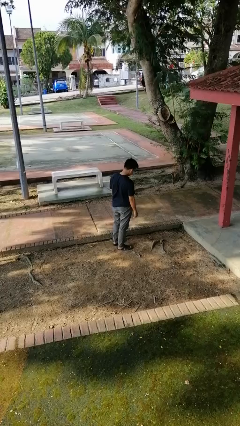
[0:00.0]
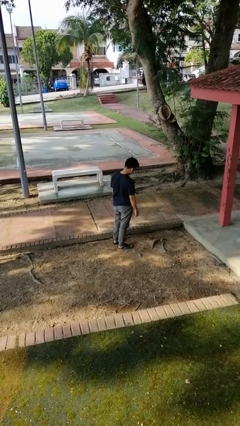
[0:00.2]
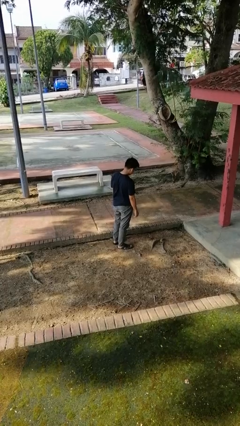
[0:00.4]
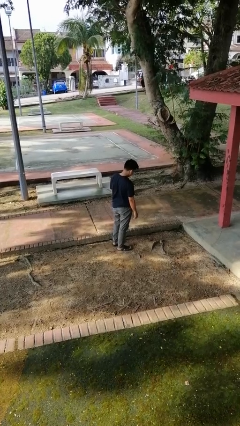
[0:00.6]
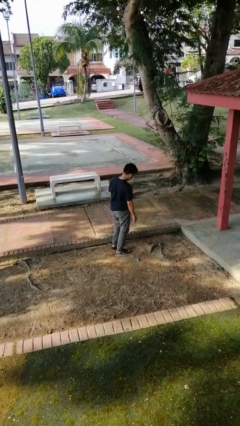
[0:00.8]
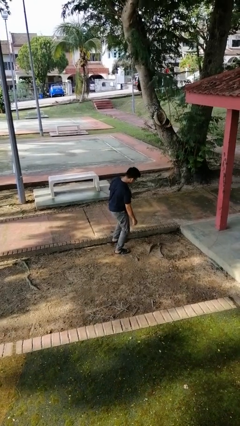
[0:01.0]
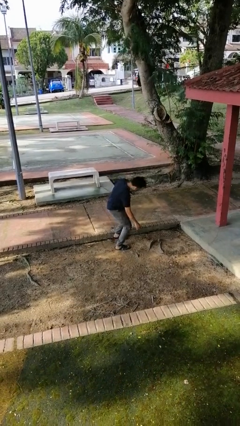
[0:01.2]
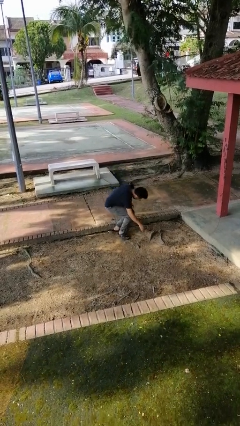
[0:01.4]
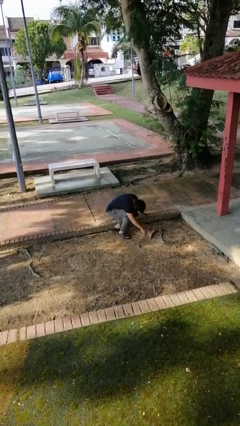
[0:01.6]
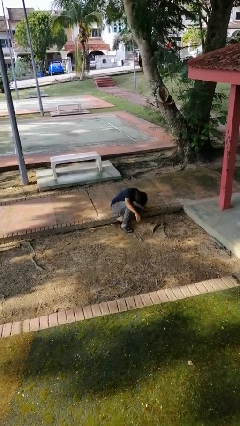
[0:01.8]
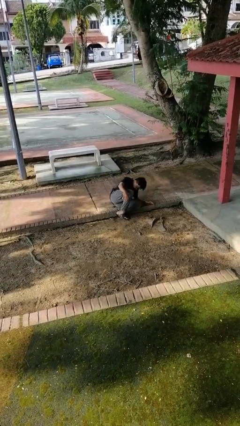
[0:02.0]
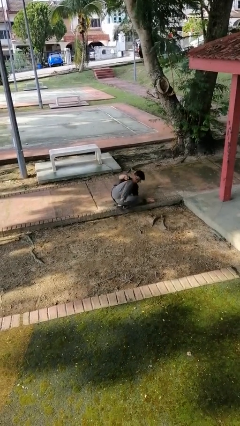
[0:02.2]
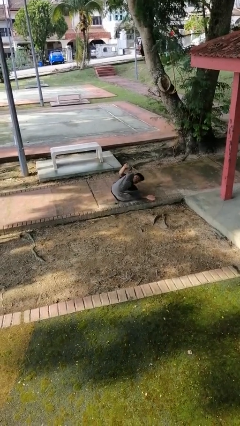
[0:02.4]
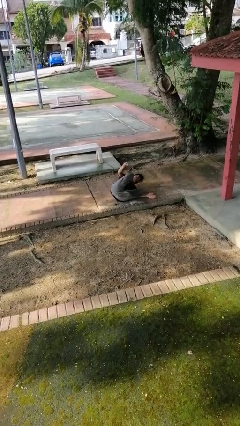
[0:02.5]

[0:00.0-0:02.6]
person trips on object on floor

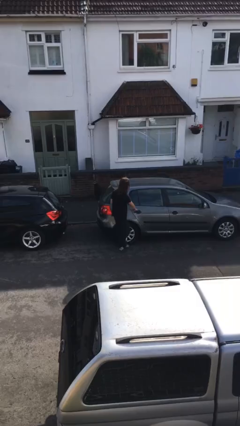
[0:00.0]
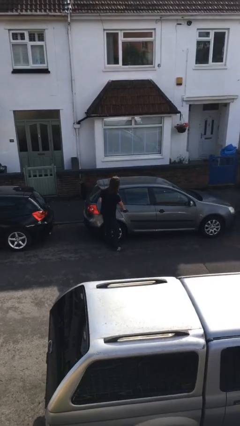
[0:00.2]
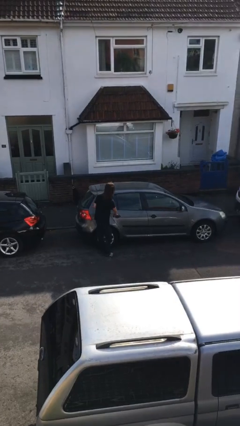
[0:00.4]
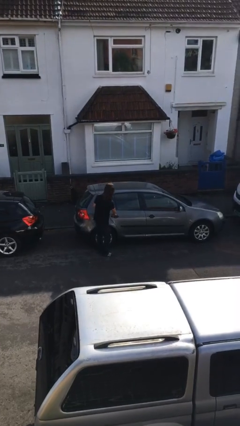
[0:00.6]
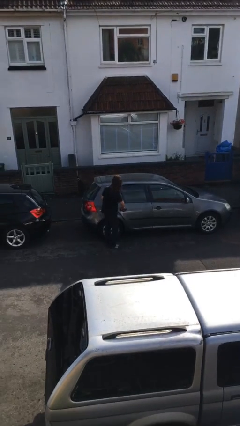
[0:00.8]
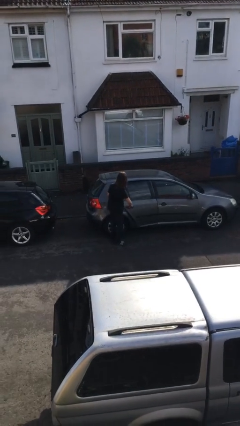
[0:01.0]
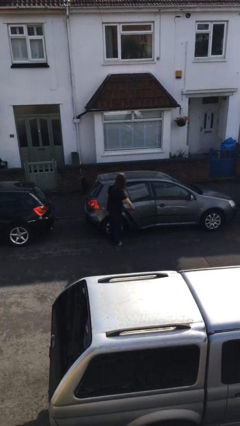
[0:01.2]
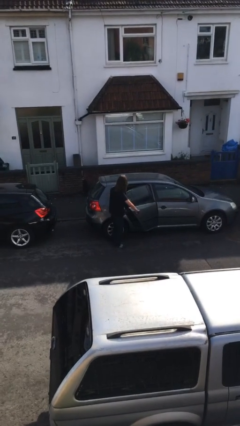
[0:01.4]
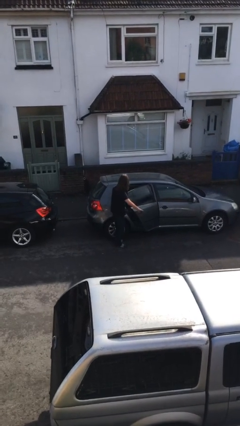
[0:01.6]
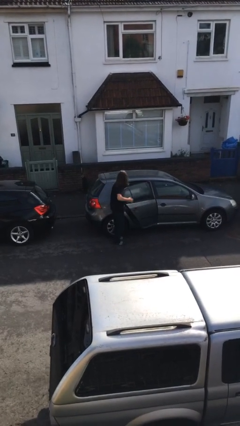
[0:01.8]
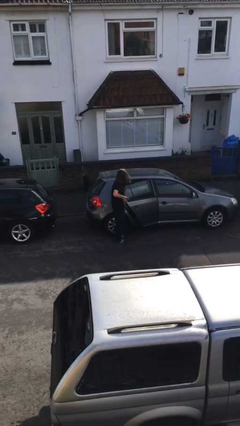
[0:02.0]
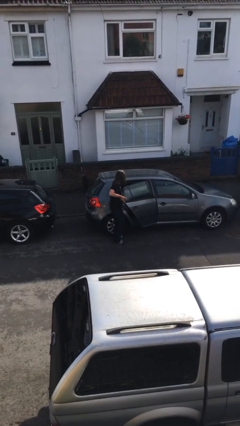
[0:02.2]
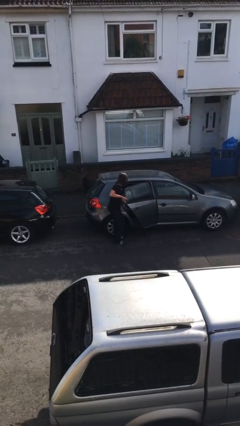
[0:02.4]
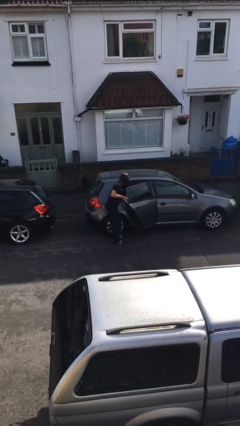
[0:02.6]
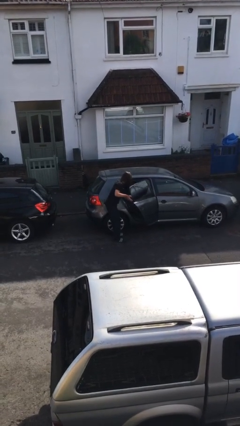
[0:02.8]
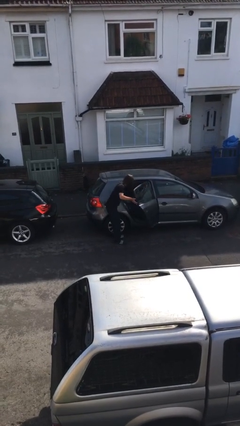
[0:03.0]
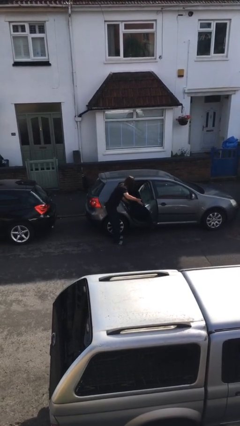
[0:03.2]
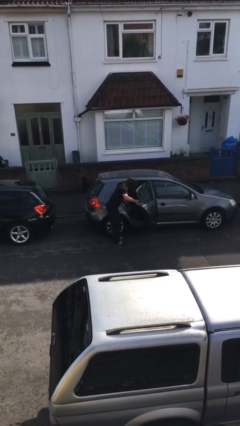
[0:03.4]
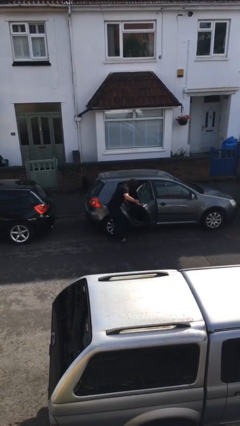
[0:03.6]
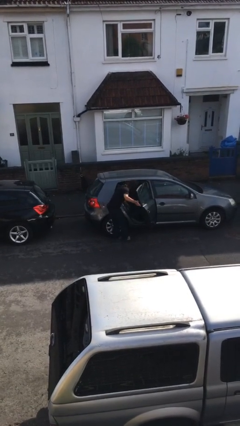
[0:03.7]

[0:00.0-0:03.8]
person opens car door

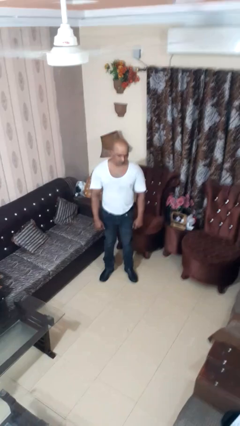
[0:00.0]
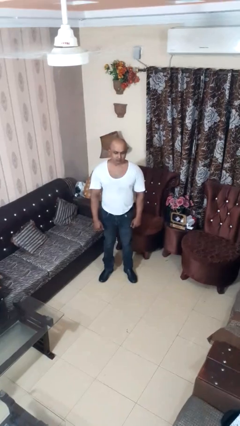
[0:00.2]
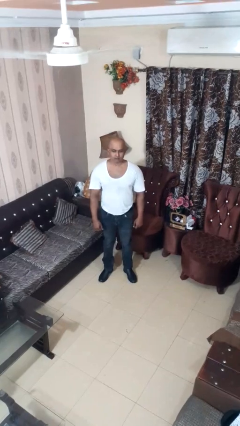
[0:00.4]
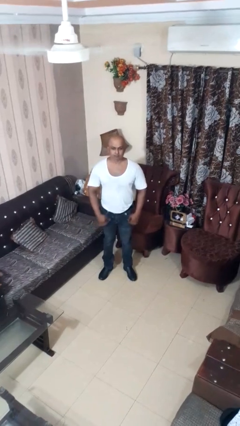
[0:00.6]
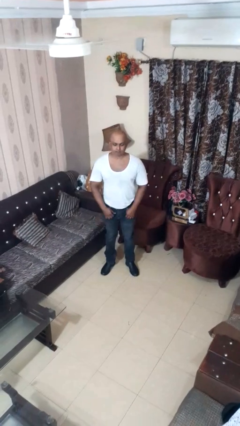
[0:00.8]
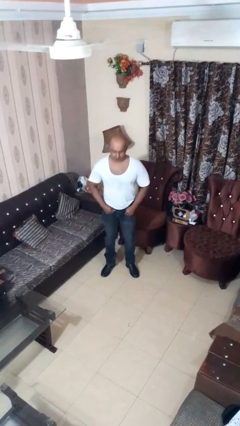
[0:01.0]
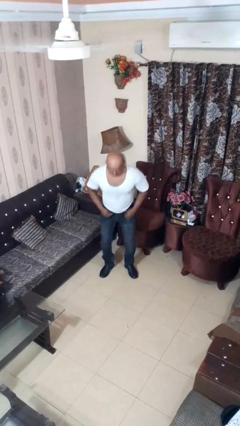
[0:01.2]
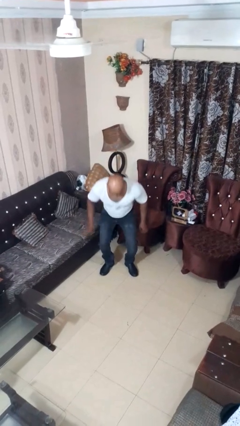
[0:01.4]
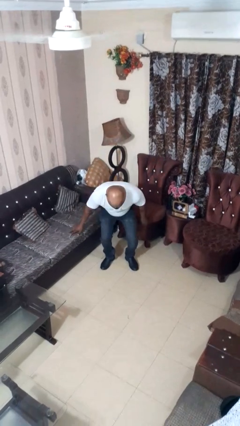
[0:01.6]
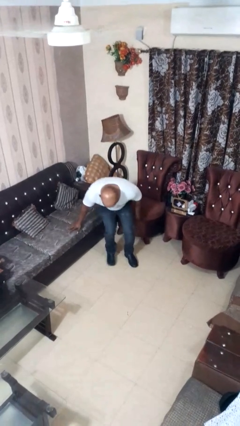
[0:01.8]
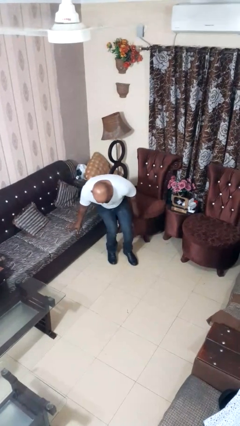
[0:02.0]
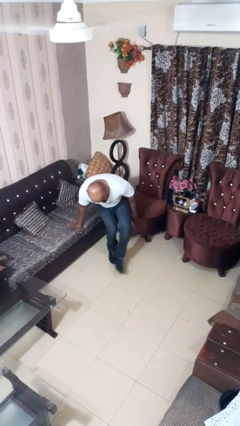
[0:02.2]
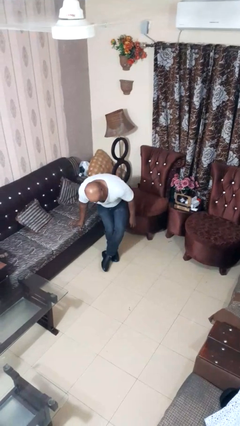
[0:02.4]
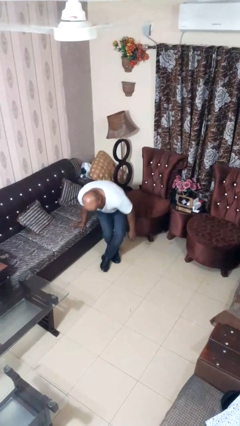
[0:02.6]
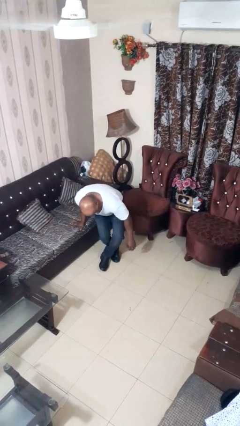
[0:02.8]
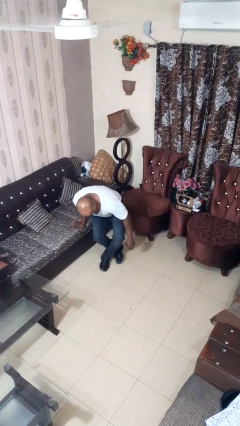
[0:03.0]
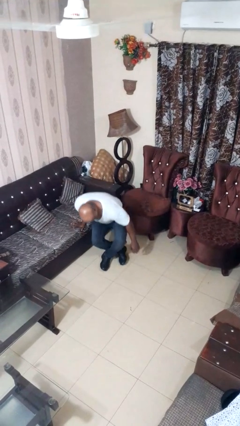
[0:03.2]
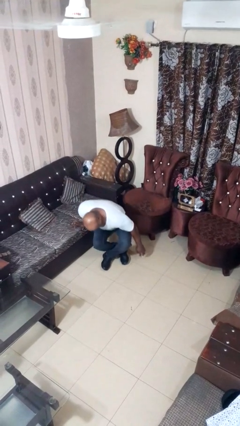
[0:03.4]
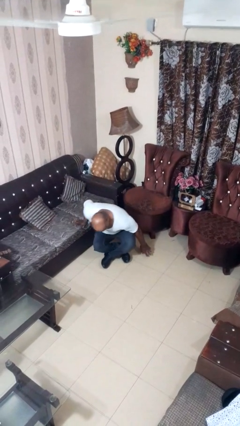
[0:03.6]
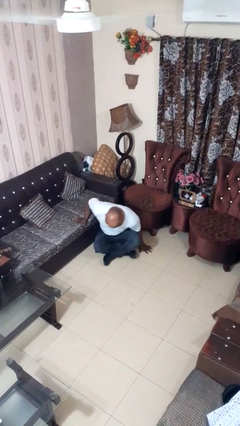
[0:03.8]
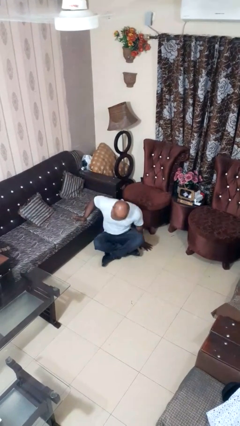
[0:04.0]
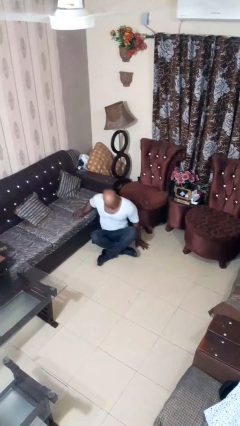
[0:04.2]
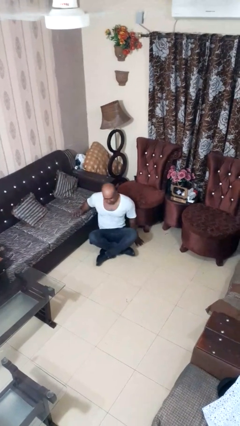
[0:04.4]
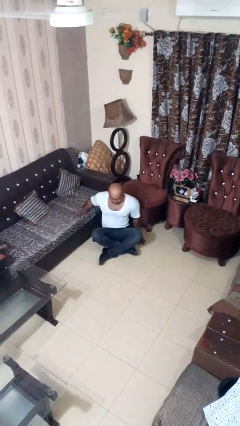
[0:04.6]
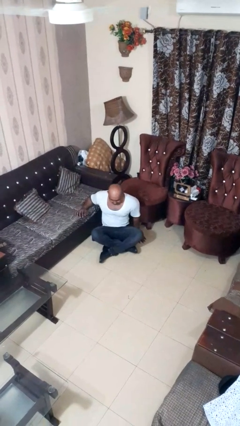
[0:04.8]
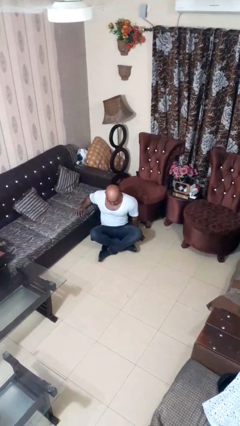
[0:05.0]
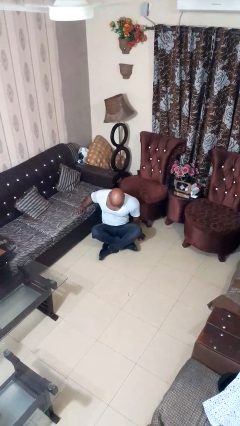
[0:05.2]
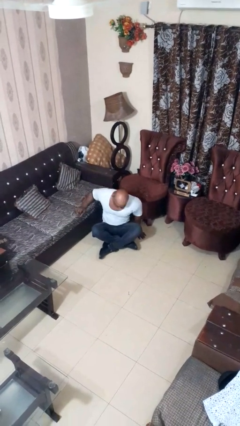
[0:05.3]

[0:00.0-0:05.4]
person sits crisscross

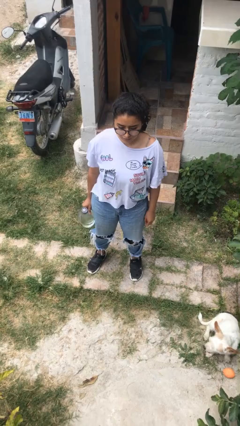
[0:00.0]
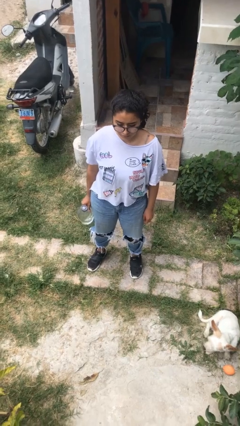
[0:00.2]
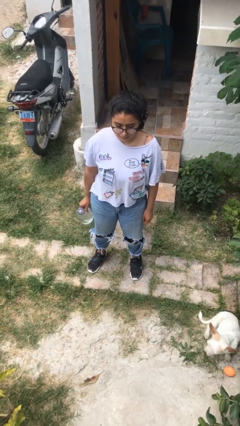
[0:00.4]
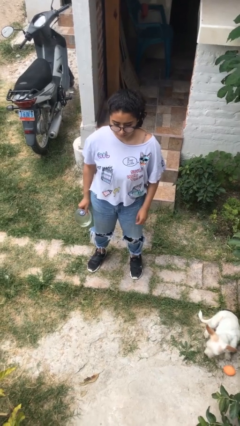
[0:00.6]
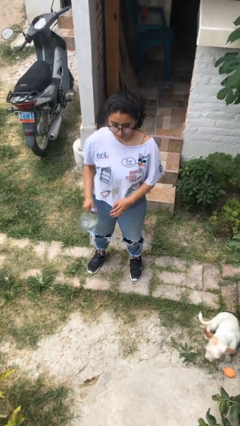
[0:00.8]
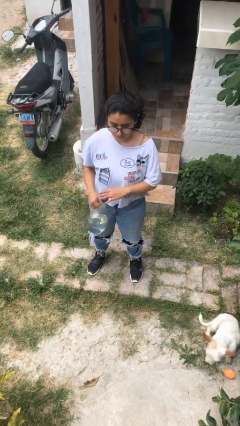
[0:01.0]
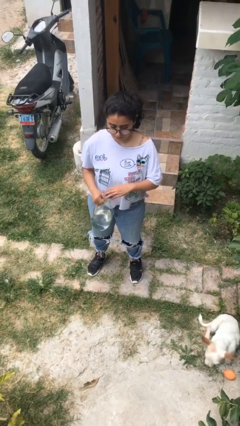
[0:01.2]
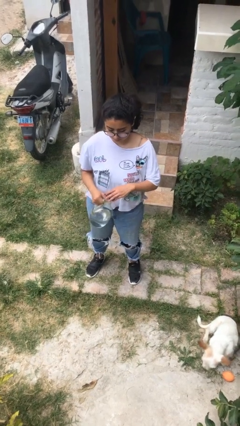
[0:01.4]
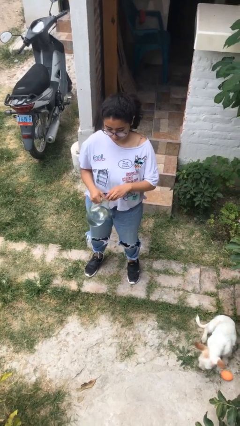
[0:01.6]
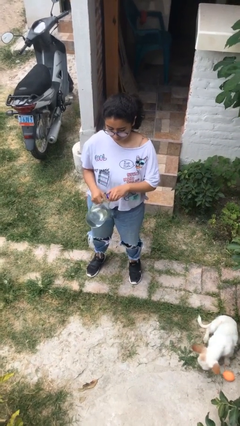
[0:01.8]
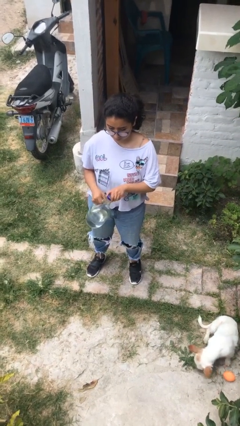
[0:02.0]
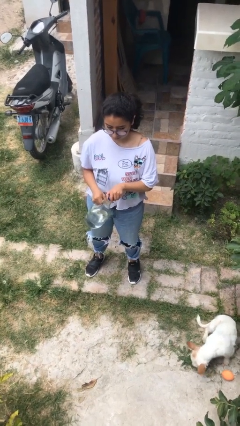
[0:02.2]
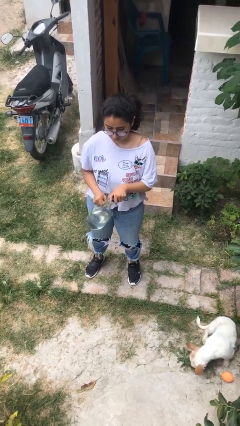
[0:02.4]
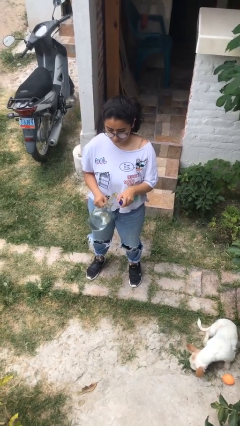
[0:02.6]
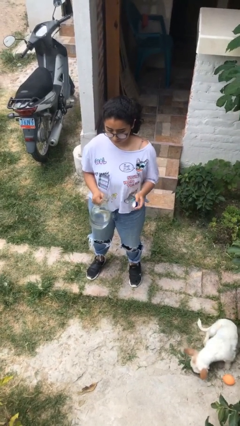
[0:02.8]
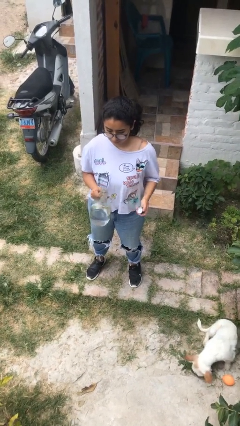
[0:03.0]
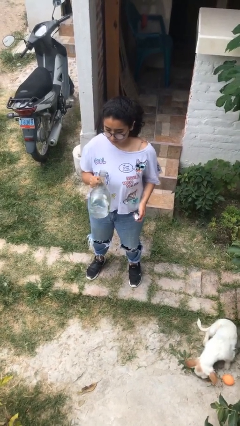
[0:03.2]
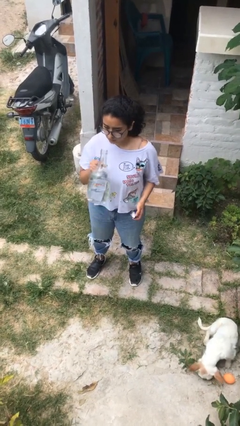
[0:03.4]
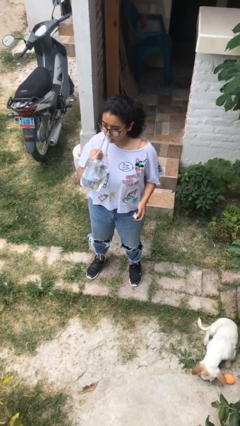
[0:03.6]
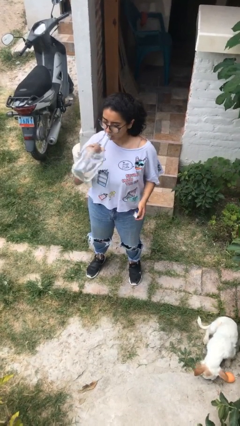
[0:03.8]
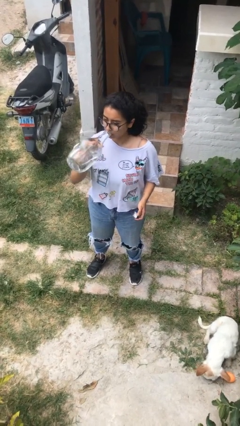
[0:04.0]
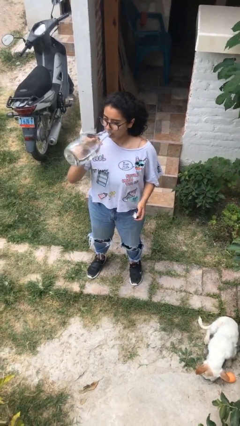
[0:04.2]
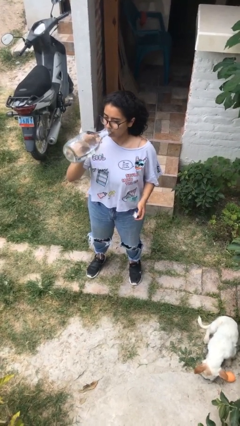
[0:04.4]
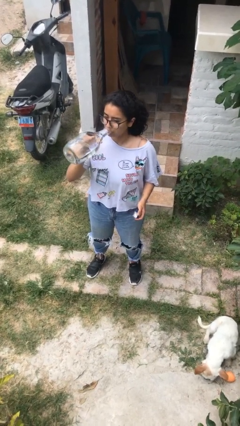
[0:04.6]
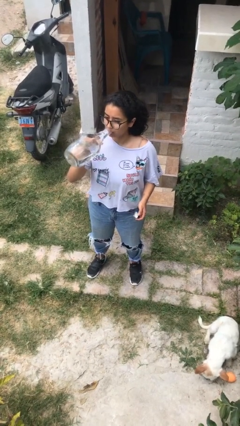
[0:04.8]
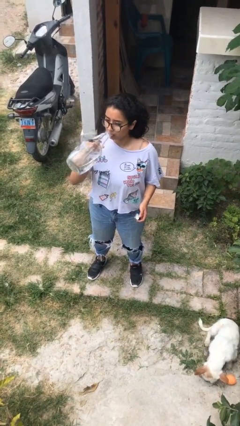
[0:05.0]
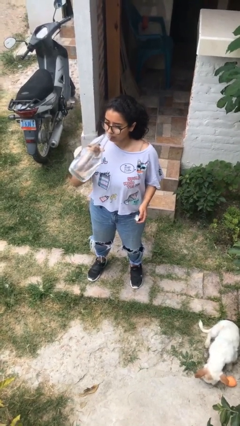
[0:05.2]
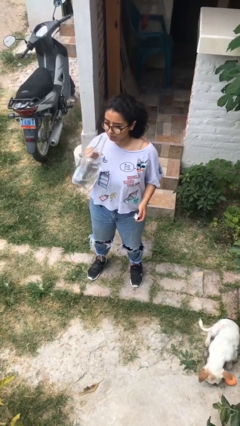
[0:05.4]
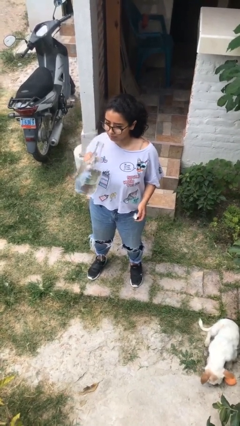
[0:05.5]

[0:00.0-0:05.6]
person drinks from bottle

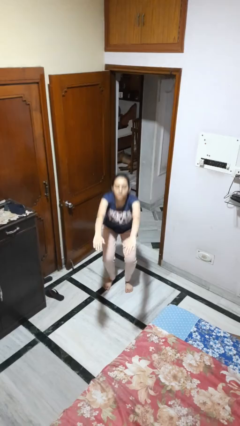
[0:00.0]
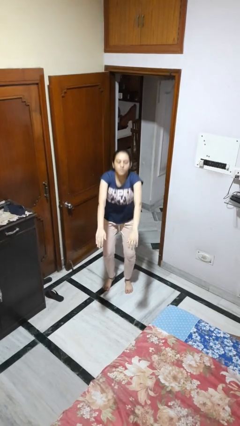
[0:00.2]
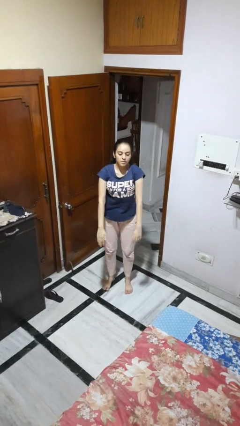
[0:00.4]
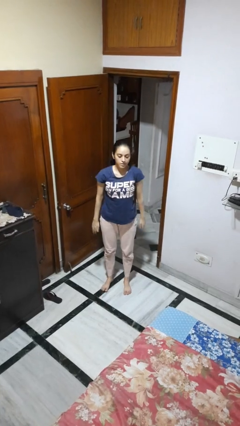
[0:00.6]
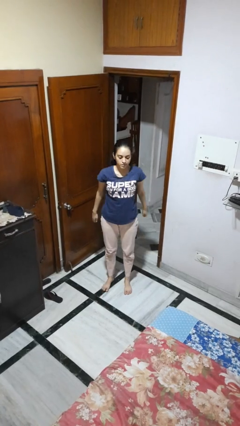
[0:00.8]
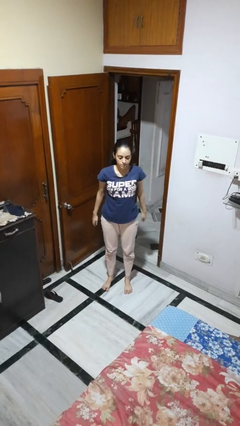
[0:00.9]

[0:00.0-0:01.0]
person stands up
